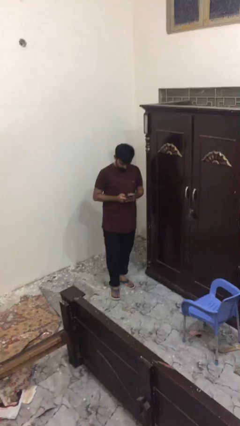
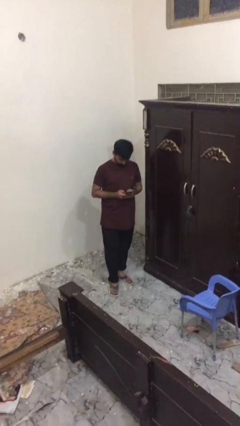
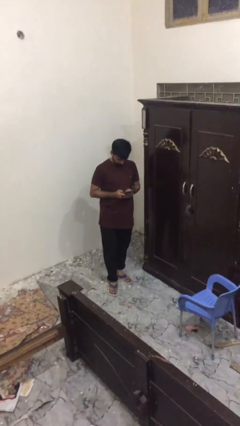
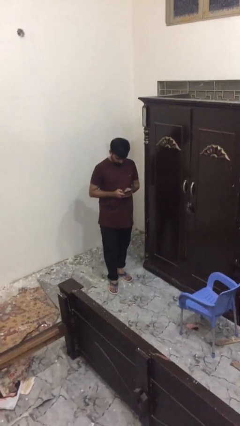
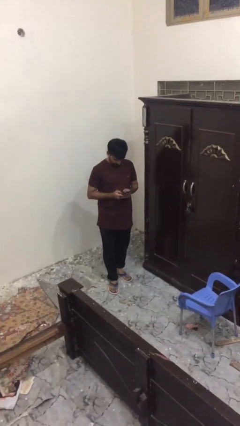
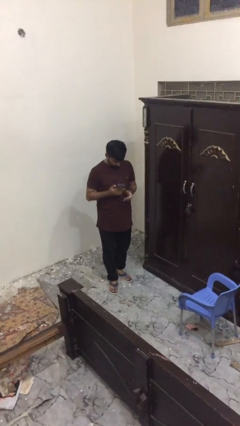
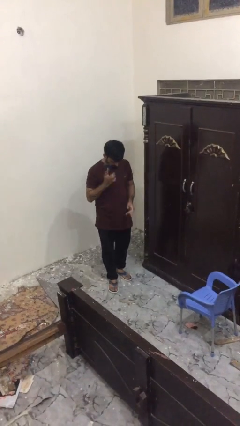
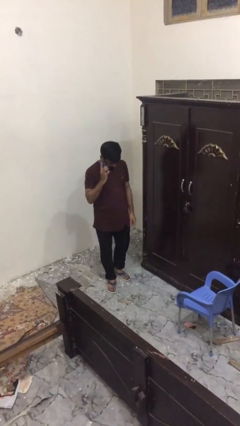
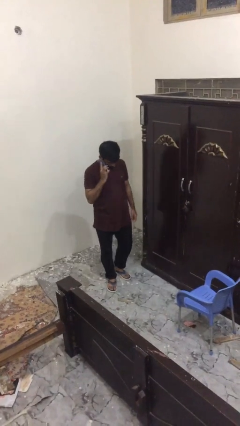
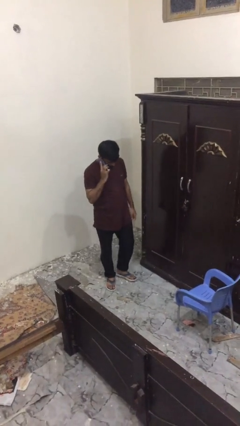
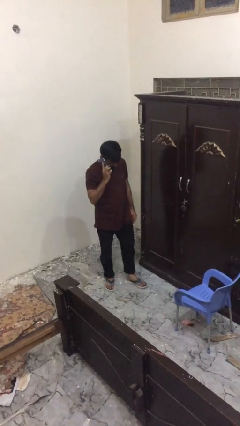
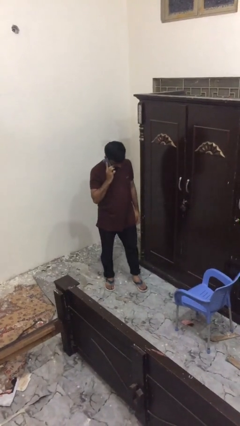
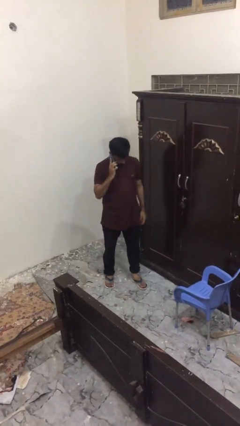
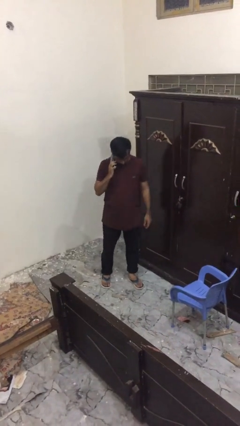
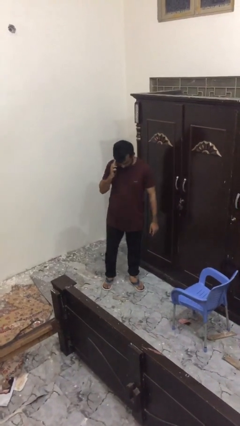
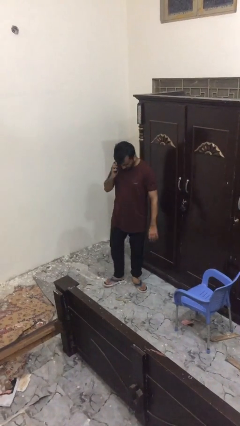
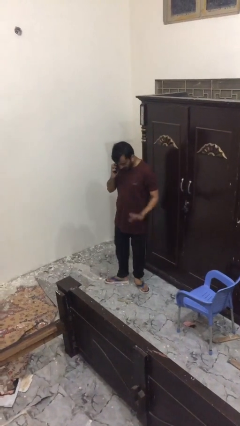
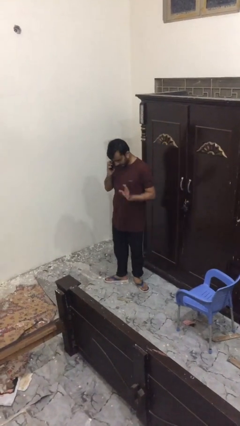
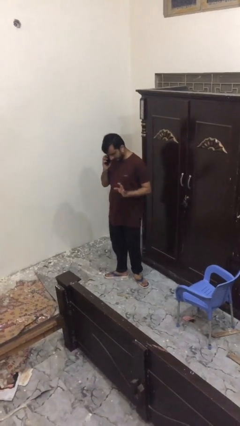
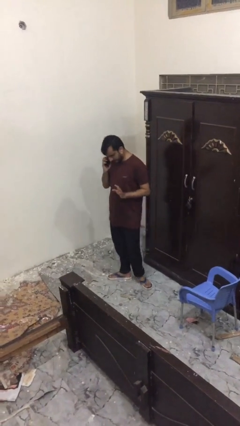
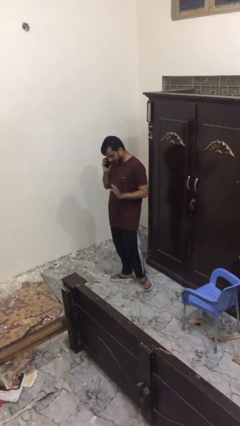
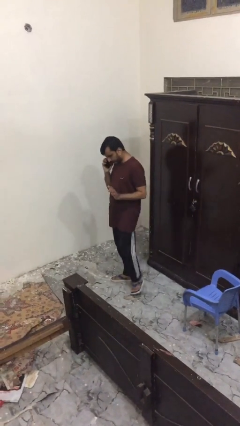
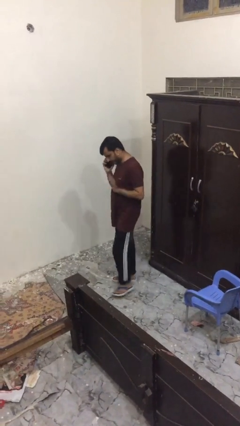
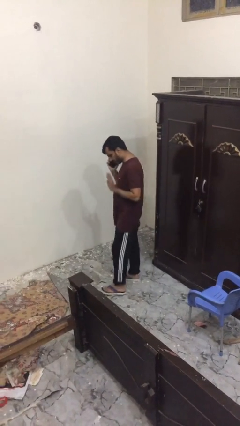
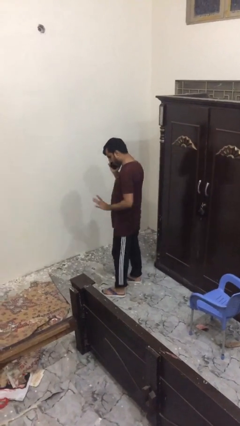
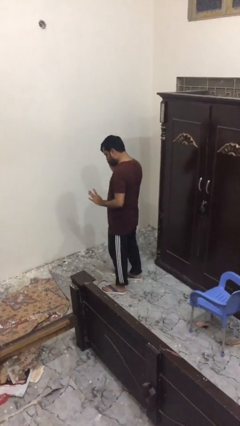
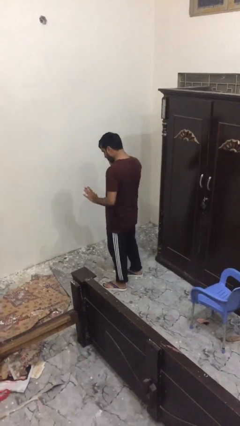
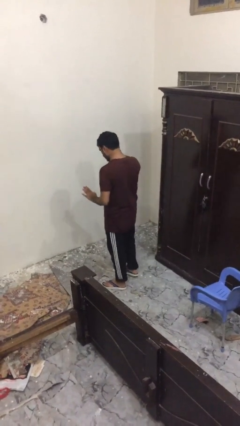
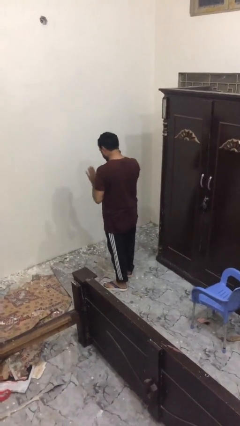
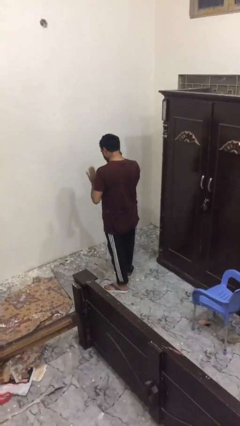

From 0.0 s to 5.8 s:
person talks on phone

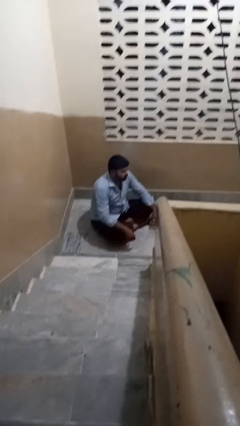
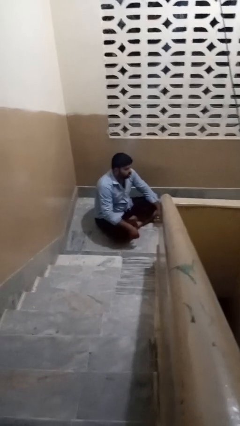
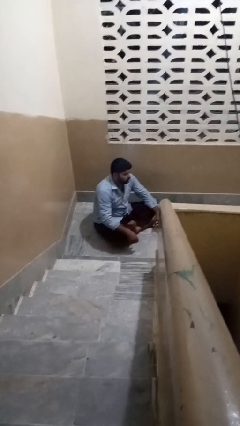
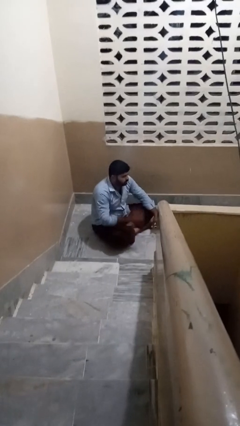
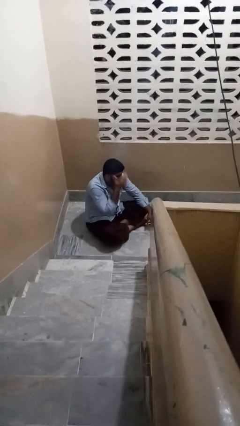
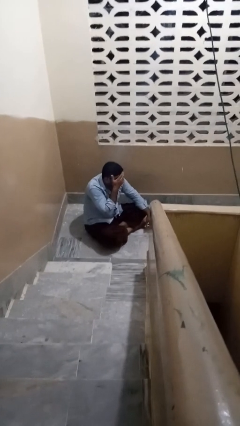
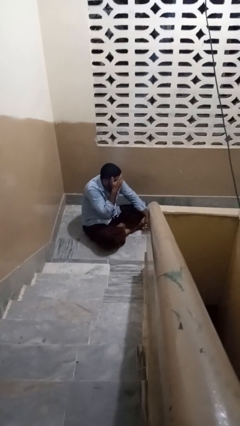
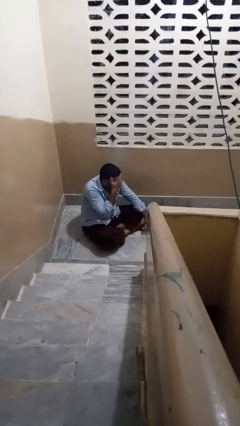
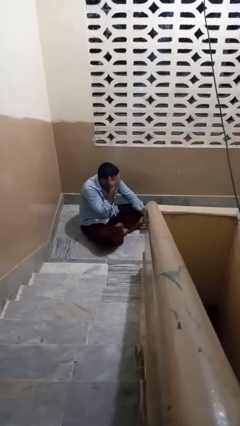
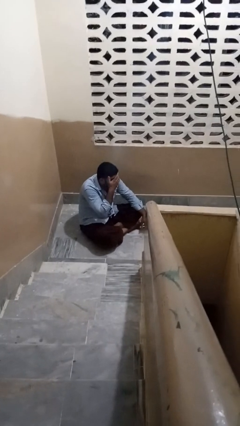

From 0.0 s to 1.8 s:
person covers face with hands

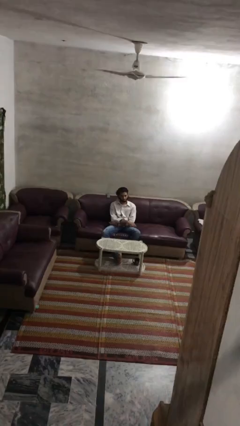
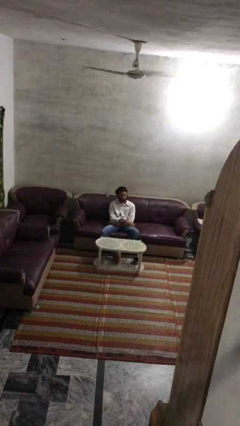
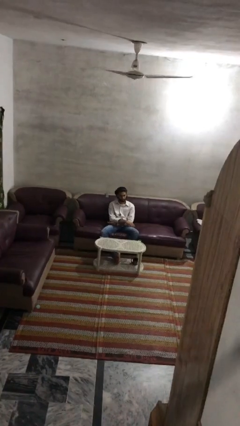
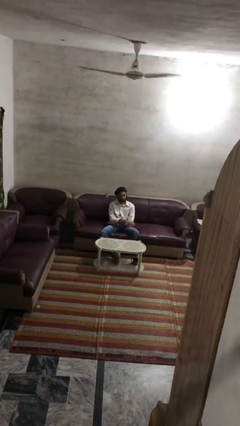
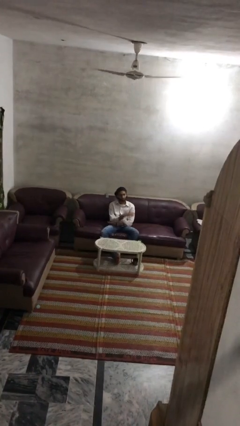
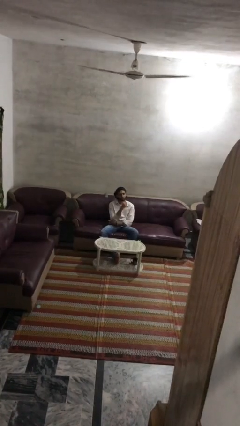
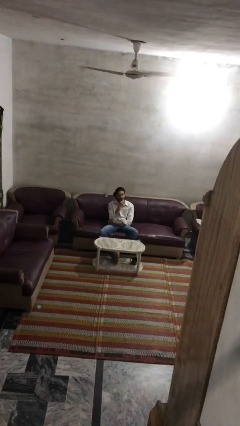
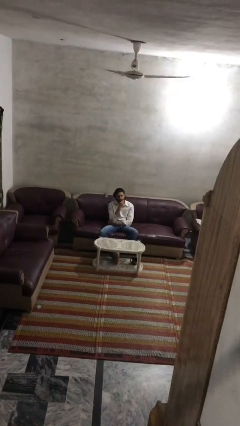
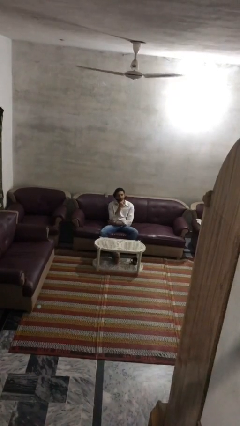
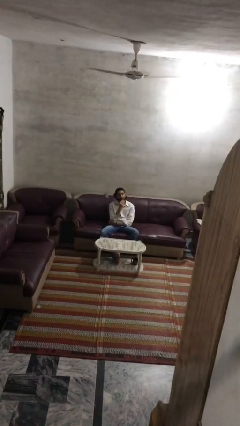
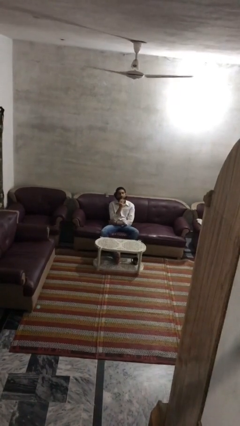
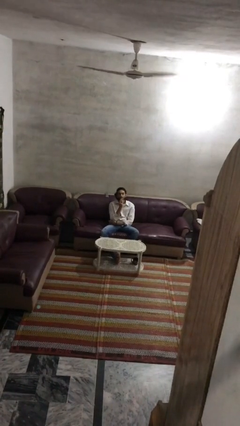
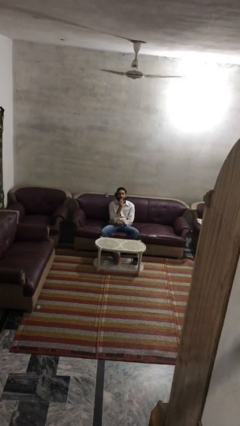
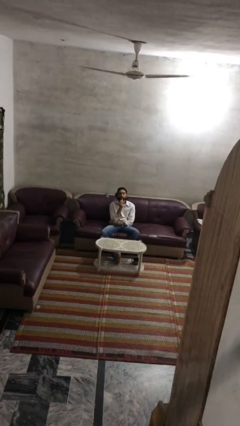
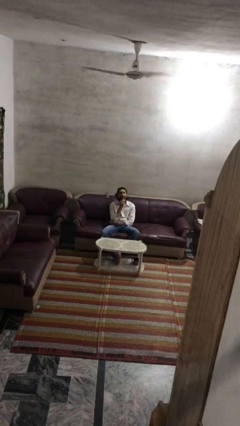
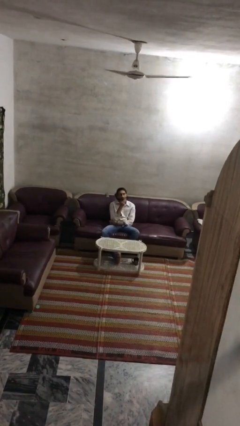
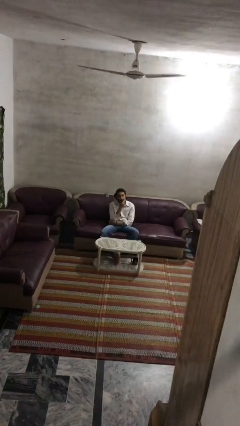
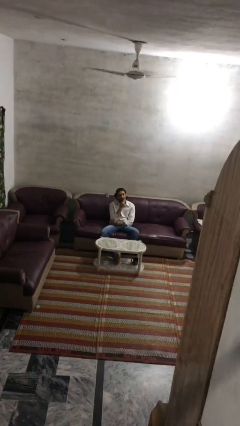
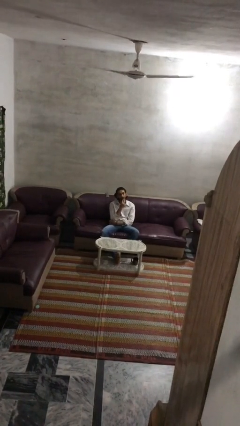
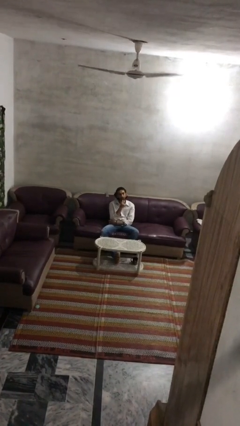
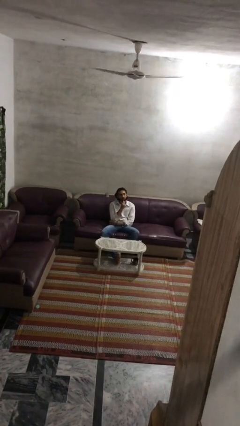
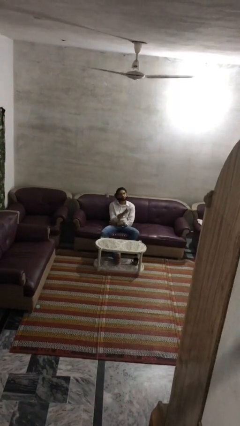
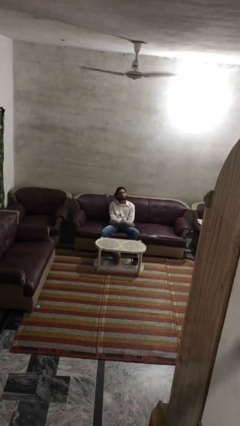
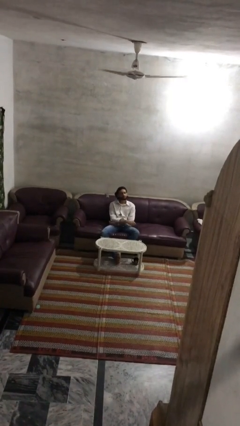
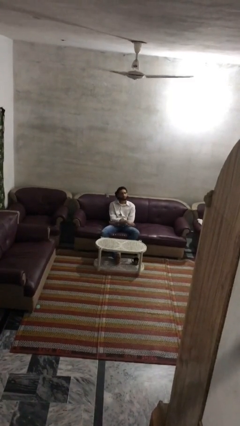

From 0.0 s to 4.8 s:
person strokes chin

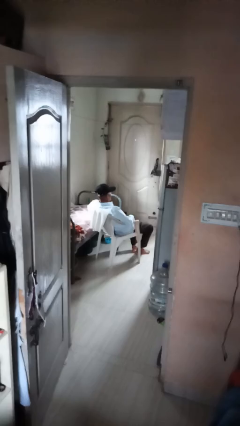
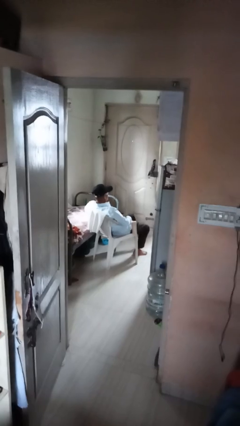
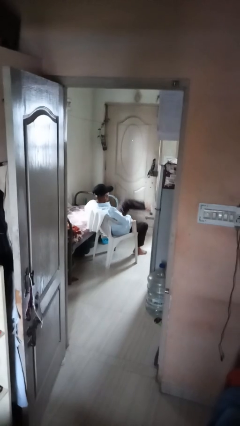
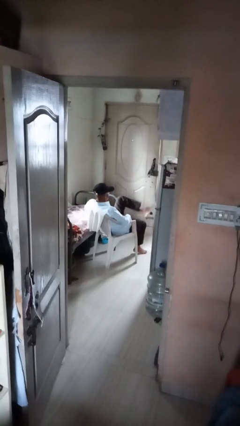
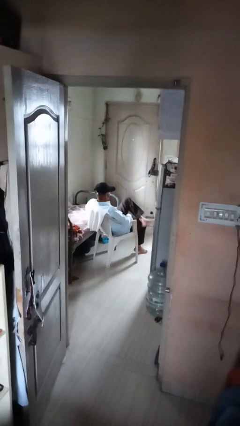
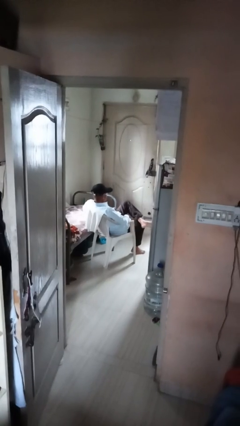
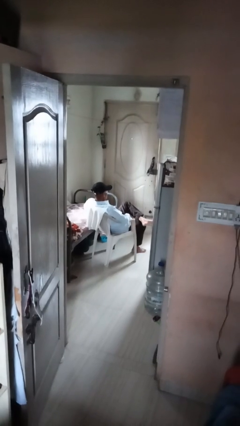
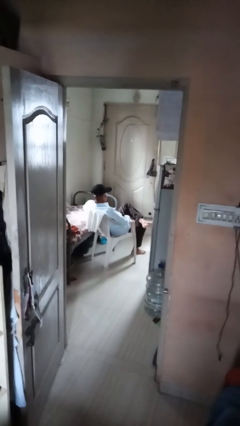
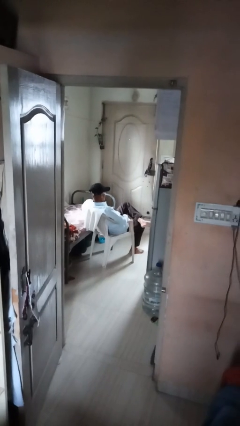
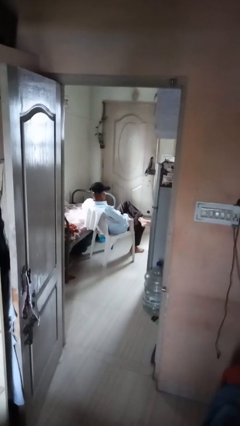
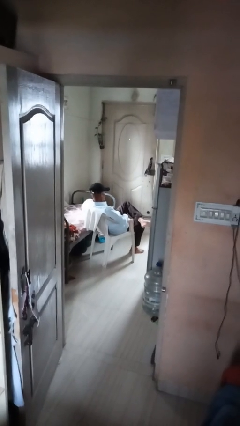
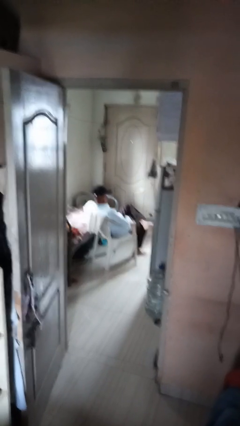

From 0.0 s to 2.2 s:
person crosses legs

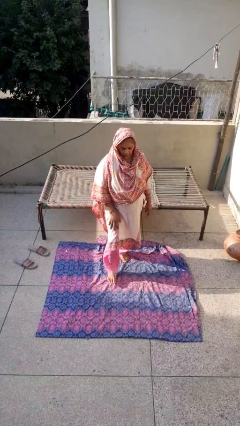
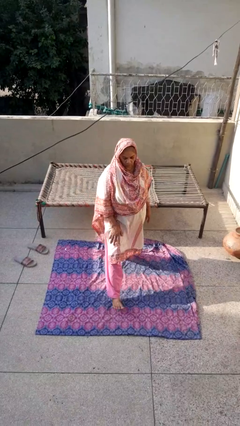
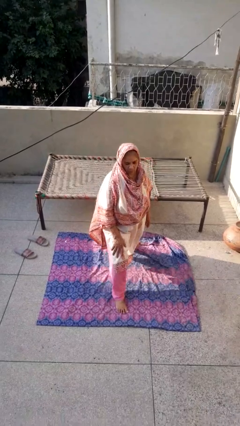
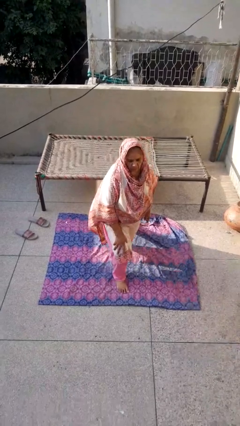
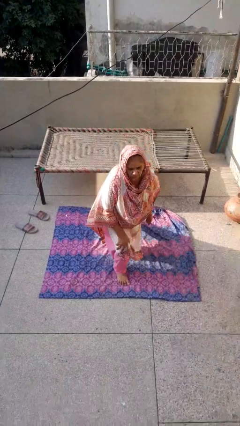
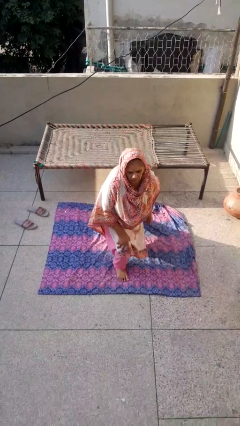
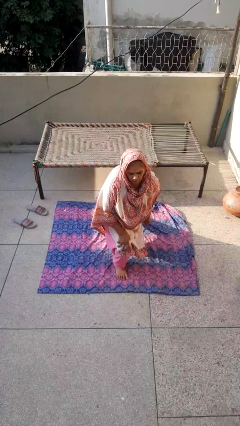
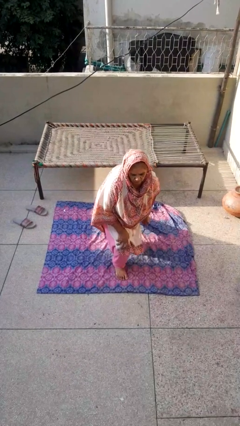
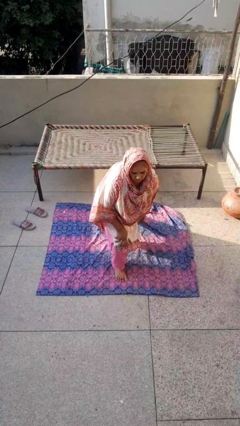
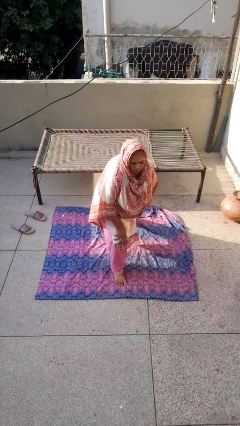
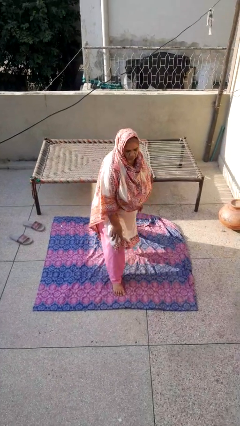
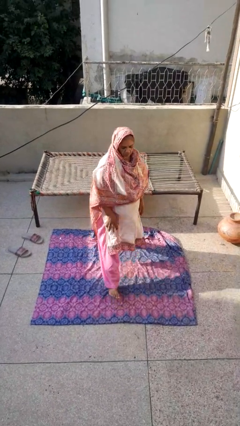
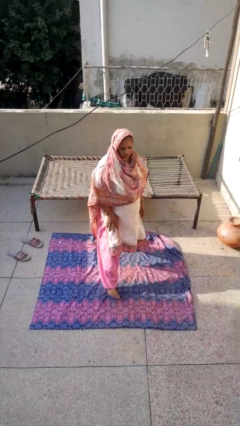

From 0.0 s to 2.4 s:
person exercises with lunges

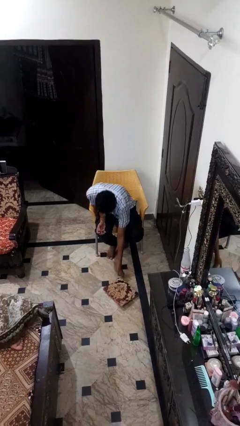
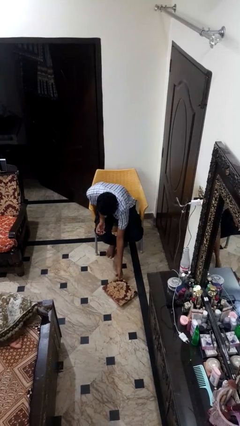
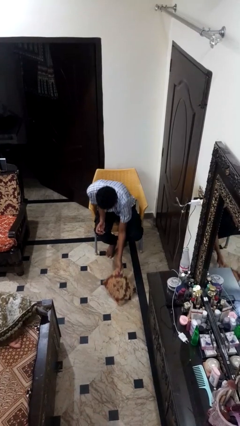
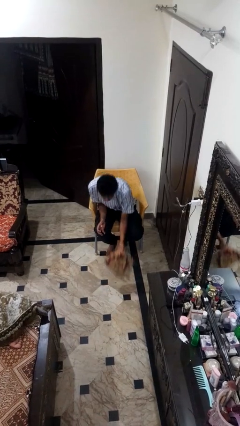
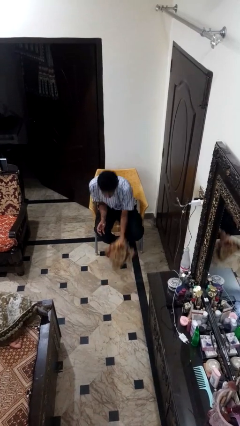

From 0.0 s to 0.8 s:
person picks up object from floor
